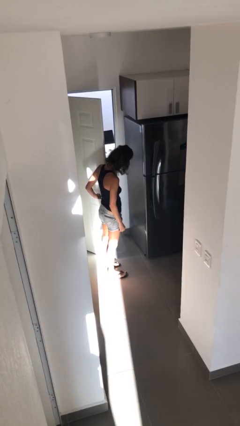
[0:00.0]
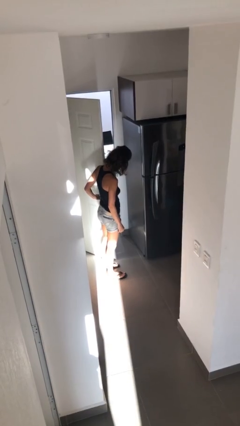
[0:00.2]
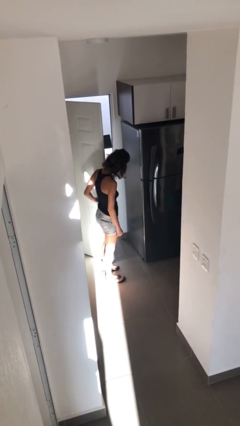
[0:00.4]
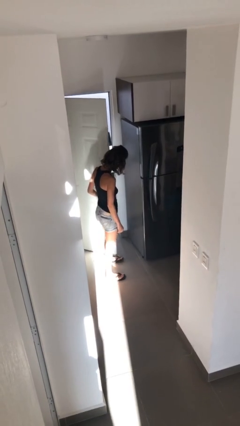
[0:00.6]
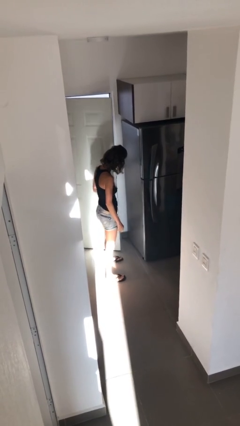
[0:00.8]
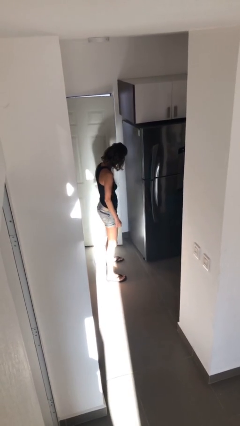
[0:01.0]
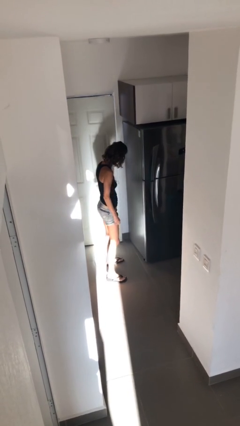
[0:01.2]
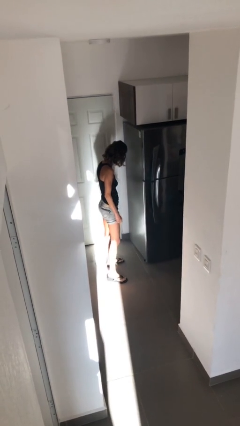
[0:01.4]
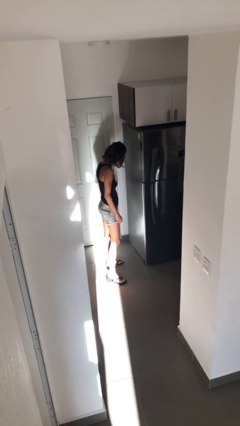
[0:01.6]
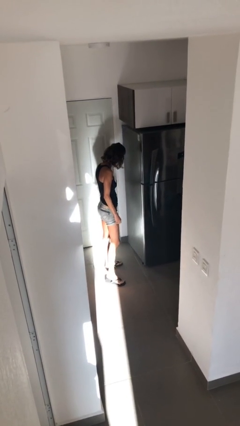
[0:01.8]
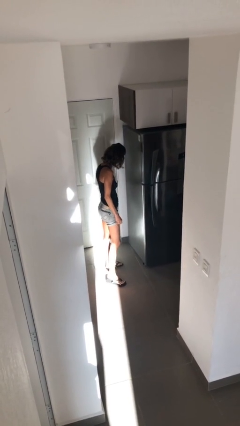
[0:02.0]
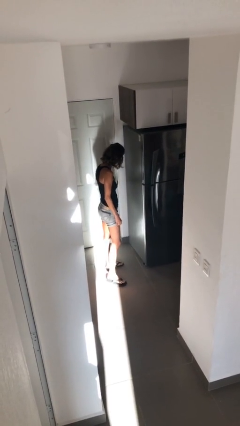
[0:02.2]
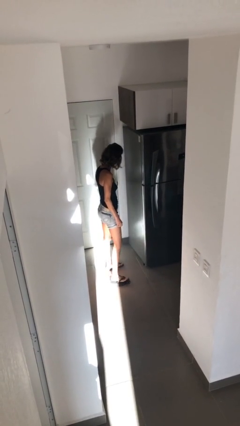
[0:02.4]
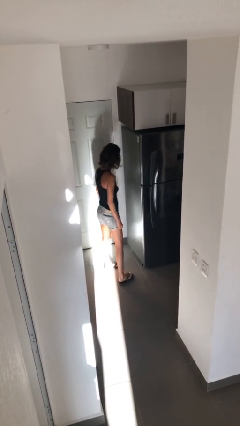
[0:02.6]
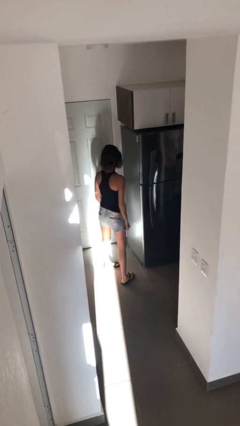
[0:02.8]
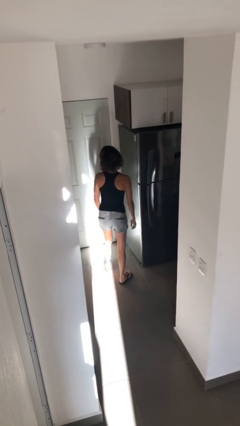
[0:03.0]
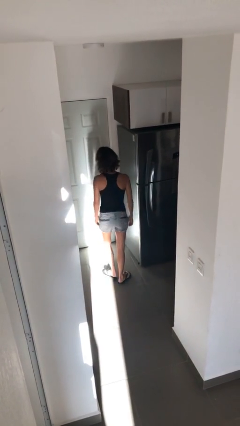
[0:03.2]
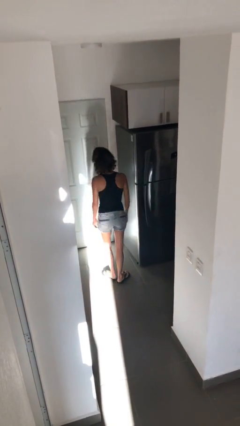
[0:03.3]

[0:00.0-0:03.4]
person closes facility door

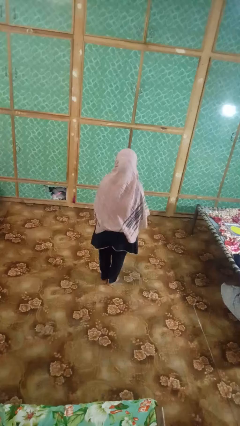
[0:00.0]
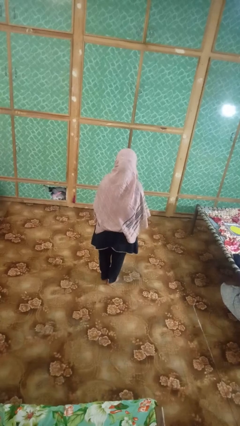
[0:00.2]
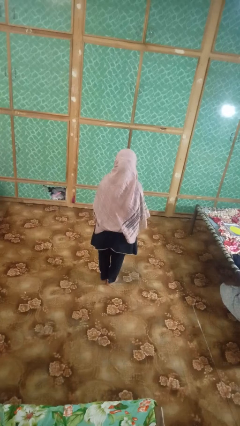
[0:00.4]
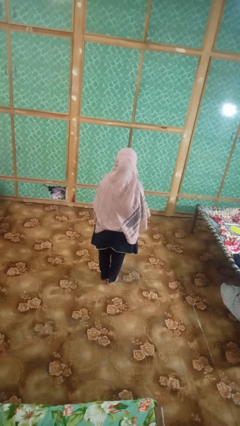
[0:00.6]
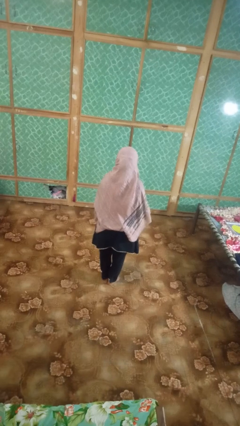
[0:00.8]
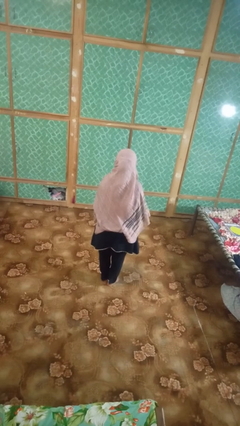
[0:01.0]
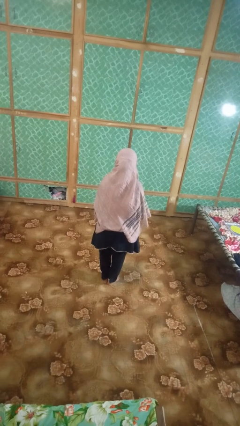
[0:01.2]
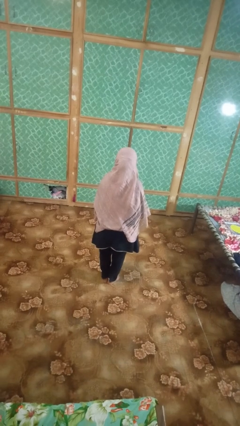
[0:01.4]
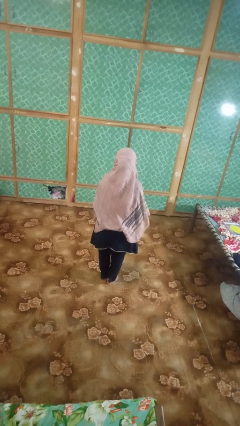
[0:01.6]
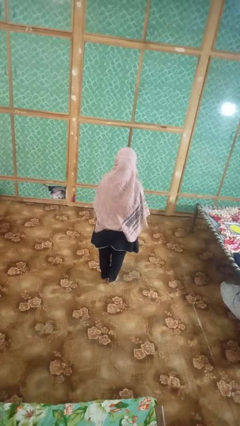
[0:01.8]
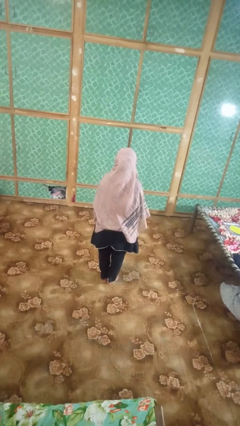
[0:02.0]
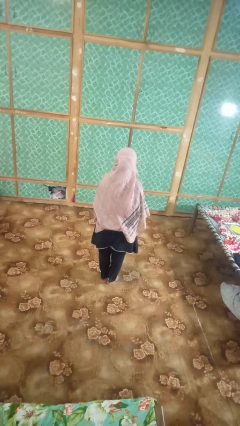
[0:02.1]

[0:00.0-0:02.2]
person gestures behind me

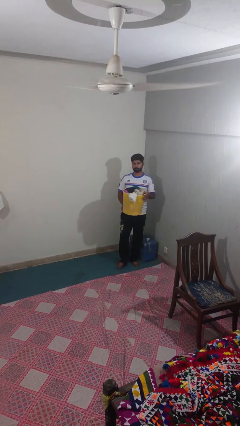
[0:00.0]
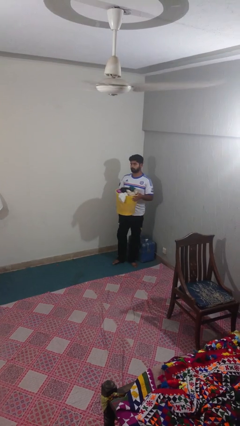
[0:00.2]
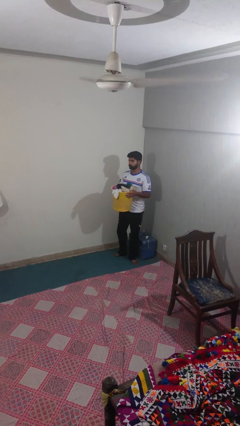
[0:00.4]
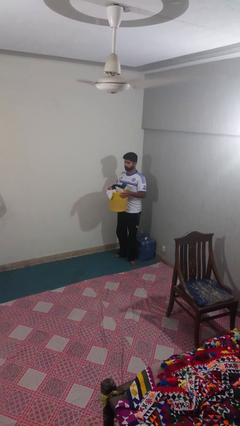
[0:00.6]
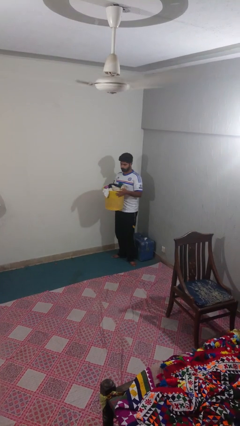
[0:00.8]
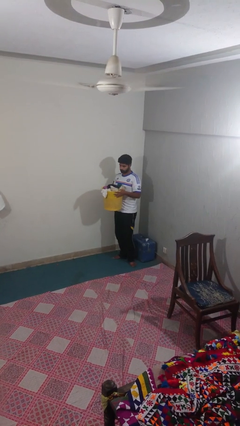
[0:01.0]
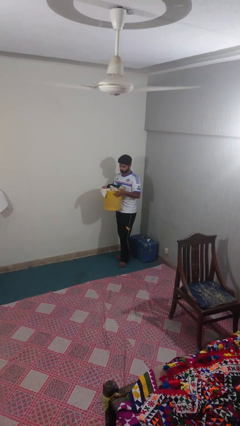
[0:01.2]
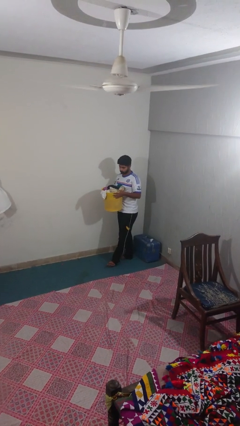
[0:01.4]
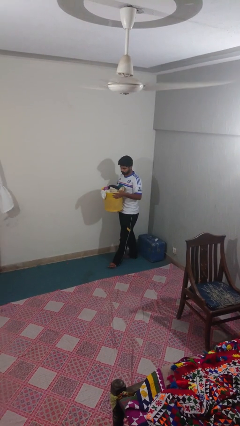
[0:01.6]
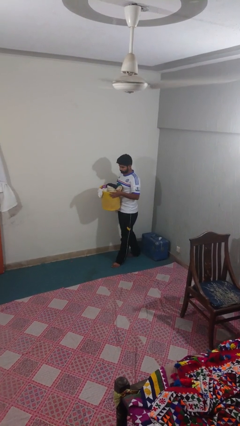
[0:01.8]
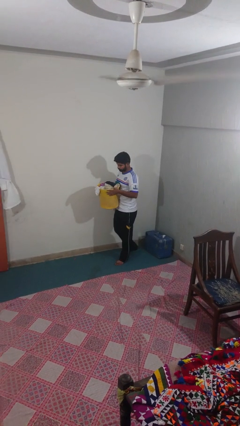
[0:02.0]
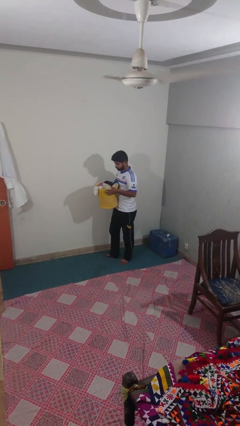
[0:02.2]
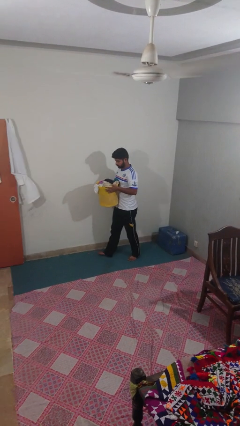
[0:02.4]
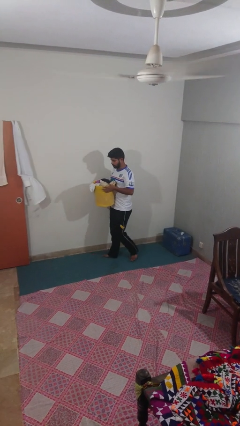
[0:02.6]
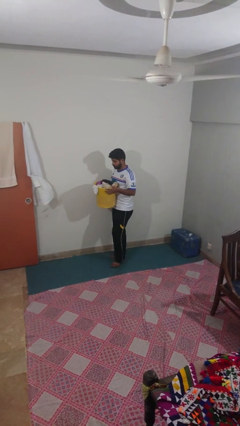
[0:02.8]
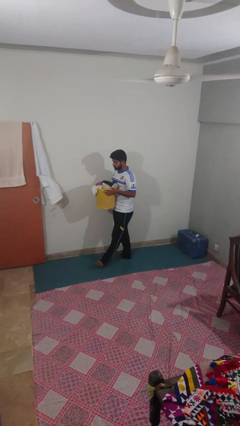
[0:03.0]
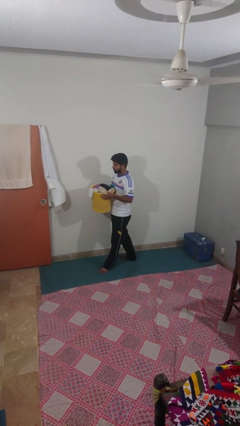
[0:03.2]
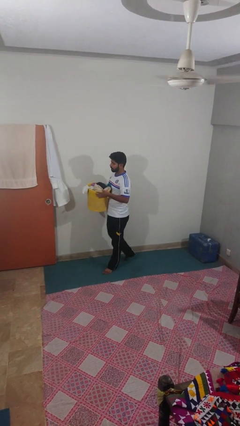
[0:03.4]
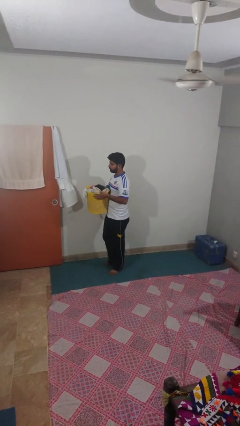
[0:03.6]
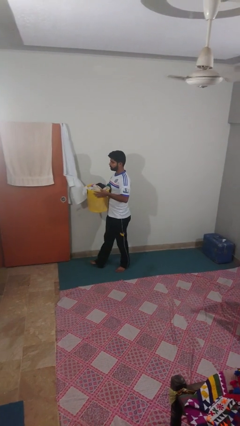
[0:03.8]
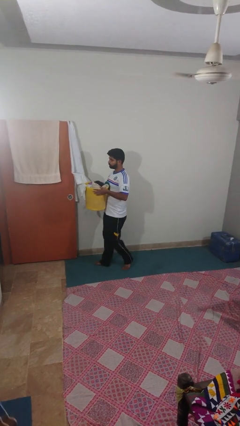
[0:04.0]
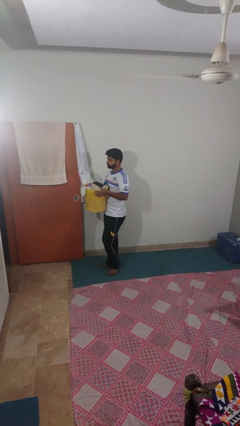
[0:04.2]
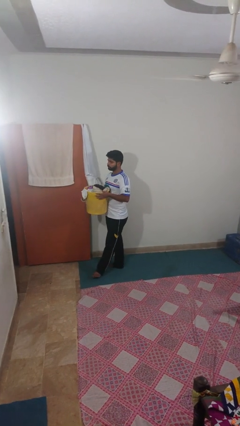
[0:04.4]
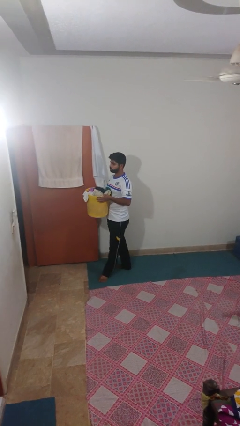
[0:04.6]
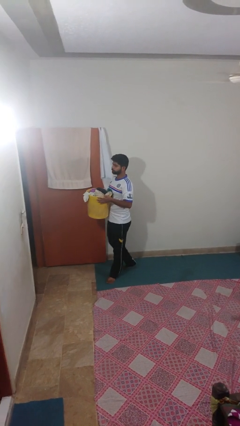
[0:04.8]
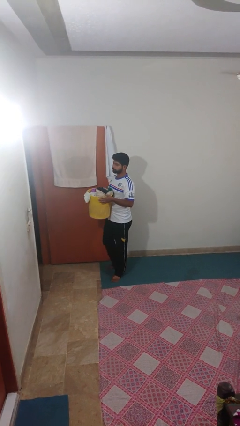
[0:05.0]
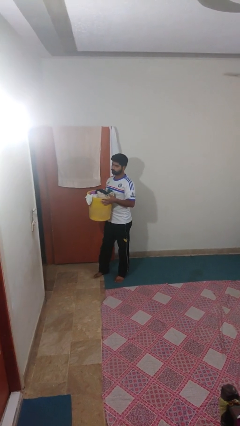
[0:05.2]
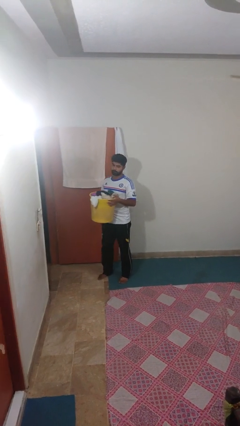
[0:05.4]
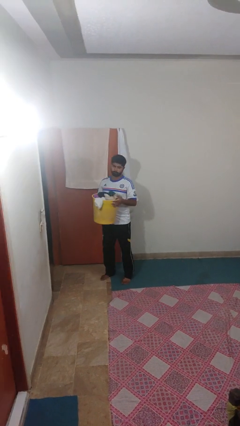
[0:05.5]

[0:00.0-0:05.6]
person carries laundry basket

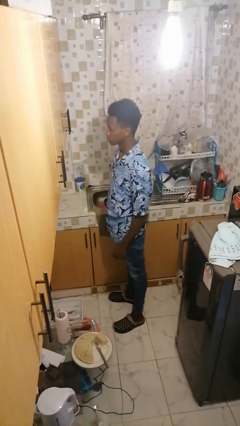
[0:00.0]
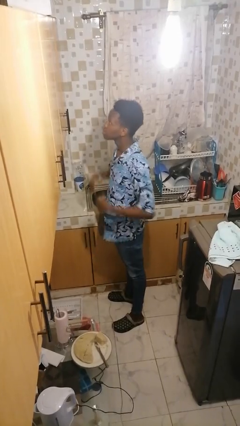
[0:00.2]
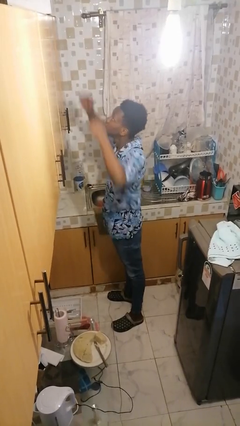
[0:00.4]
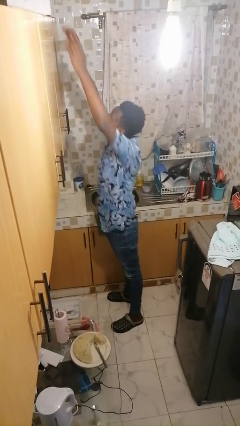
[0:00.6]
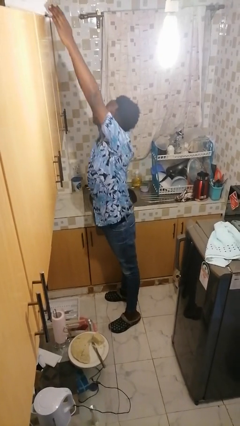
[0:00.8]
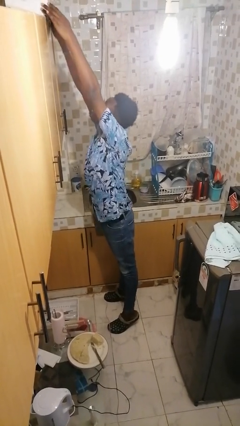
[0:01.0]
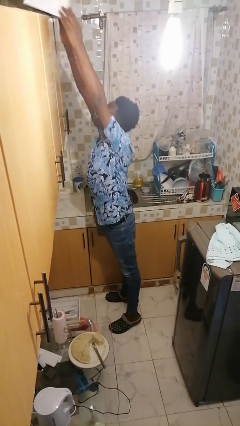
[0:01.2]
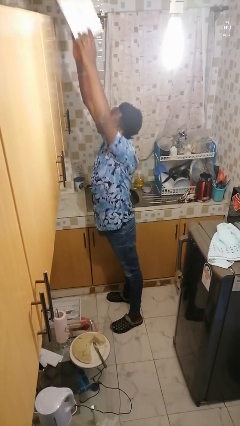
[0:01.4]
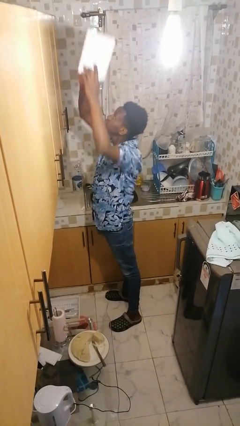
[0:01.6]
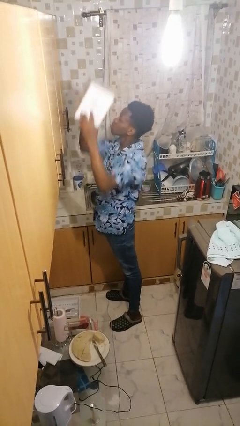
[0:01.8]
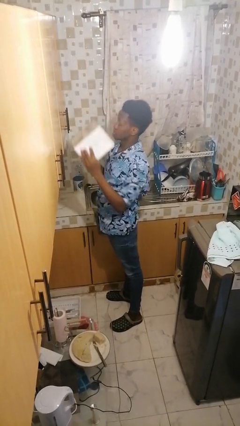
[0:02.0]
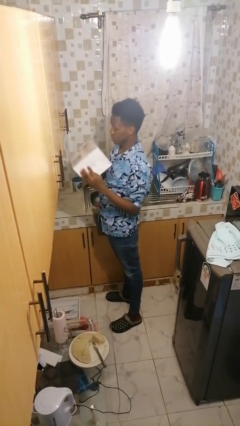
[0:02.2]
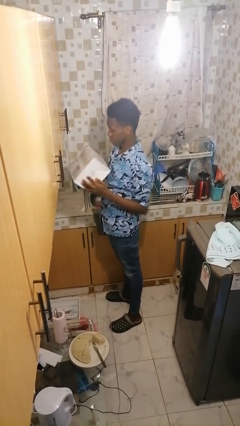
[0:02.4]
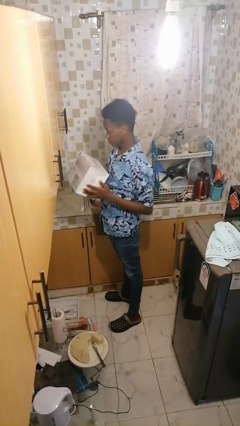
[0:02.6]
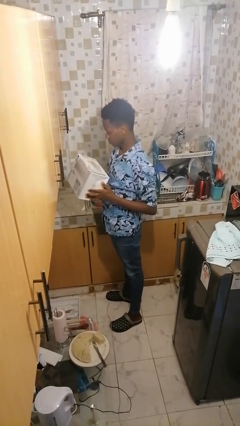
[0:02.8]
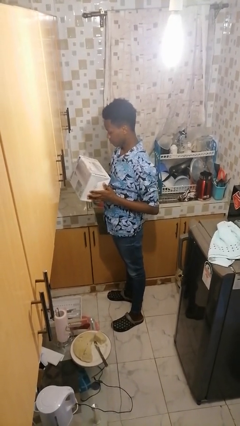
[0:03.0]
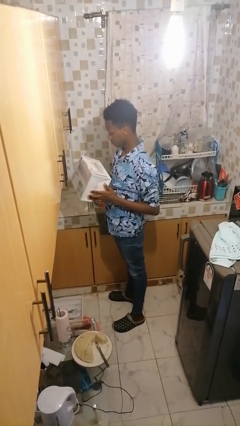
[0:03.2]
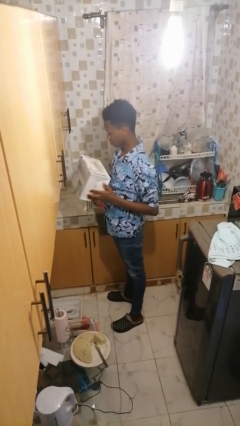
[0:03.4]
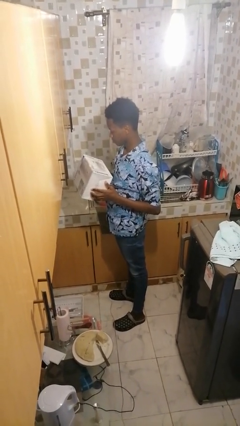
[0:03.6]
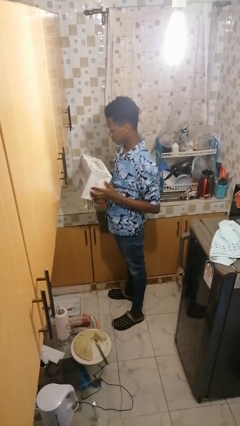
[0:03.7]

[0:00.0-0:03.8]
person picks up object from shelf

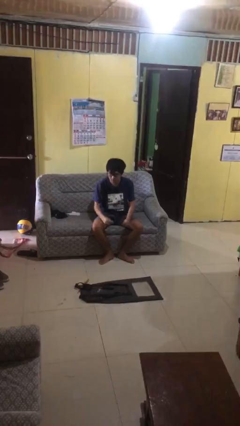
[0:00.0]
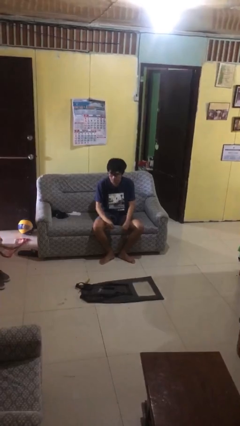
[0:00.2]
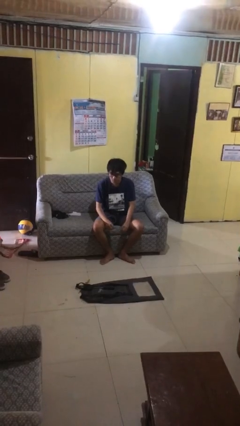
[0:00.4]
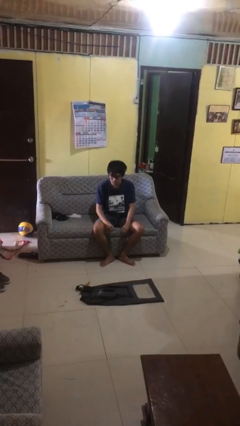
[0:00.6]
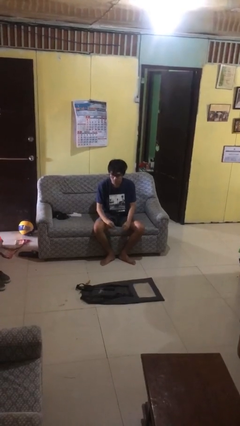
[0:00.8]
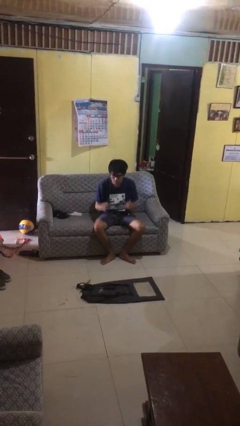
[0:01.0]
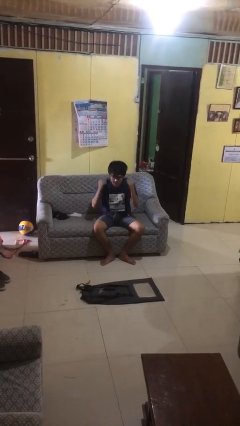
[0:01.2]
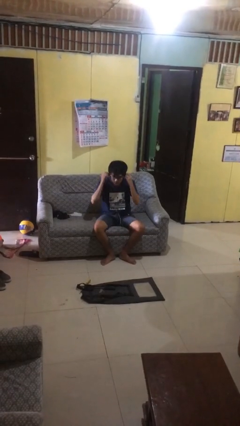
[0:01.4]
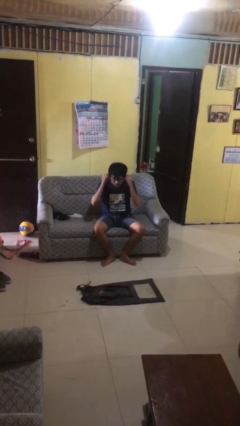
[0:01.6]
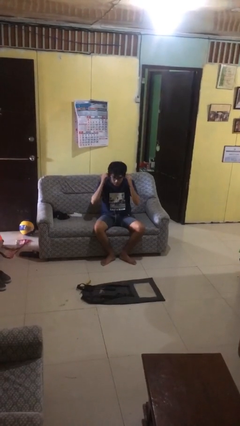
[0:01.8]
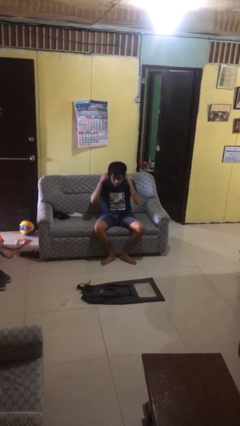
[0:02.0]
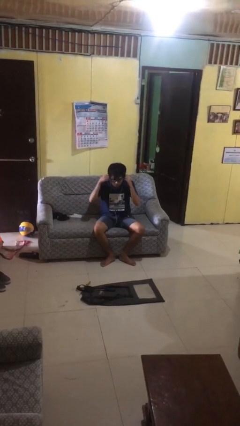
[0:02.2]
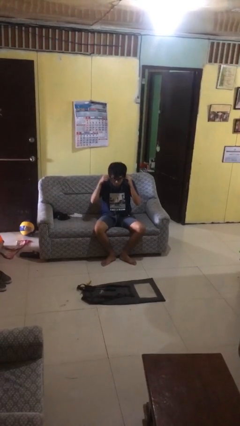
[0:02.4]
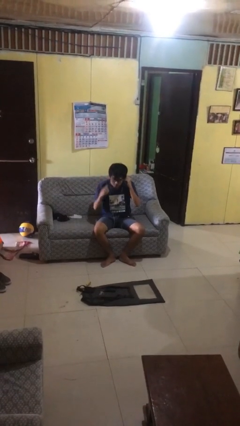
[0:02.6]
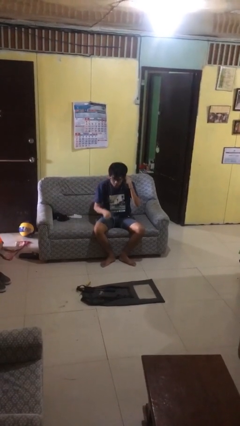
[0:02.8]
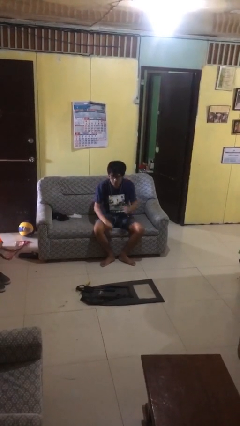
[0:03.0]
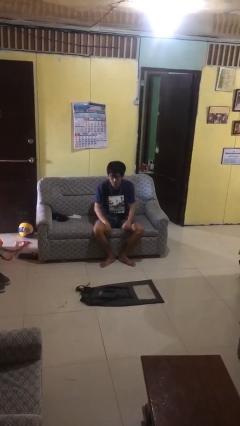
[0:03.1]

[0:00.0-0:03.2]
person puts on headphones
